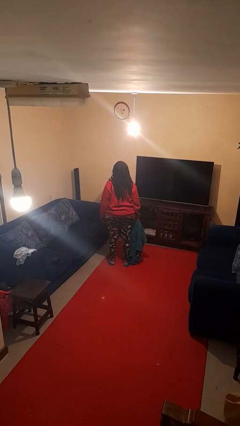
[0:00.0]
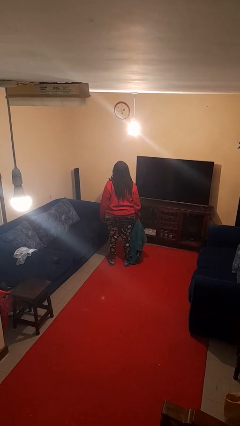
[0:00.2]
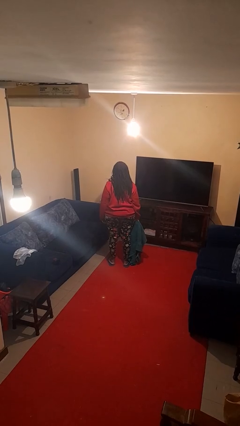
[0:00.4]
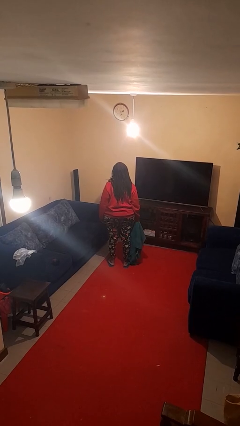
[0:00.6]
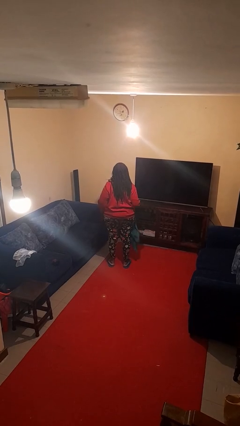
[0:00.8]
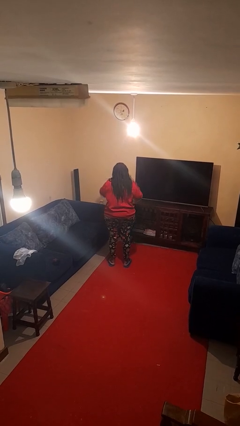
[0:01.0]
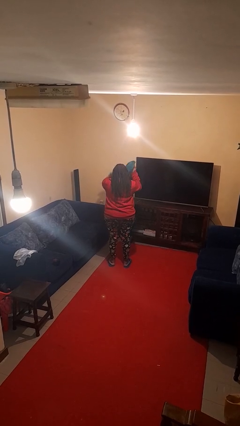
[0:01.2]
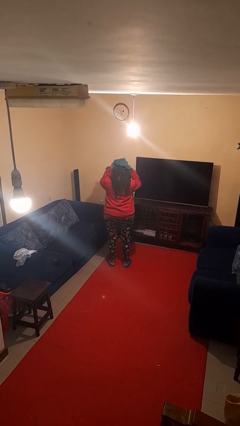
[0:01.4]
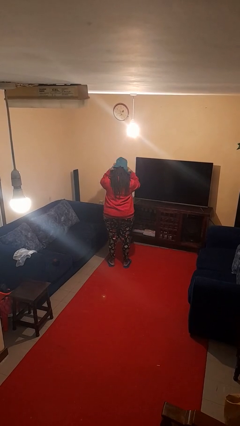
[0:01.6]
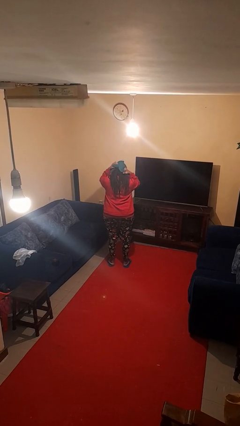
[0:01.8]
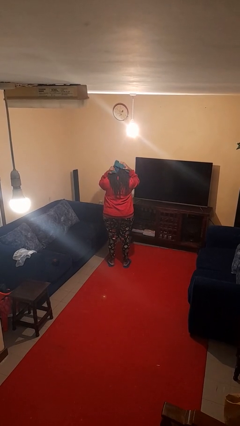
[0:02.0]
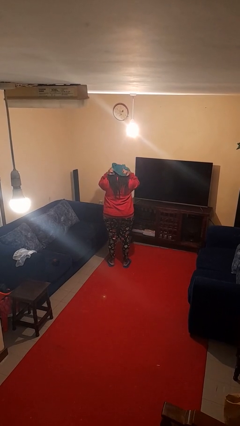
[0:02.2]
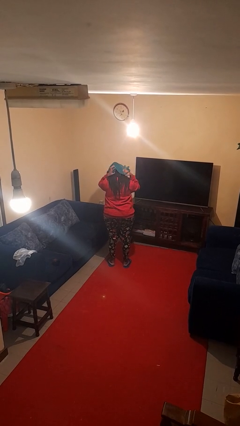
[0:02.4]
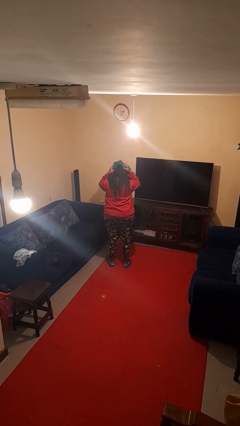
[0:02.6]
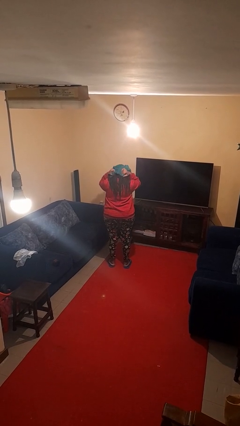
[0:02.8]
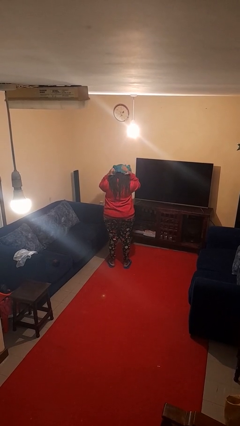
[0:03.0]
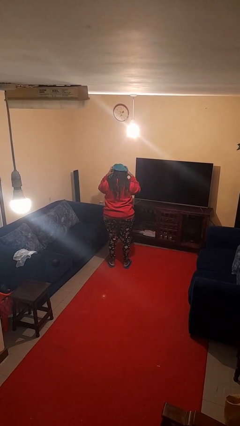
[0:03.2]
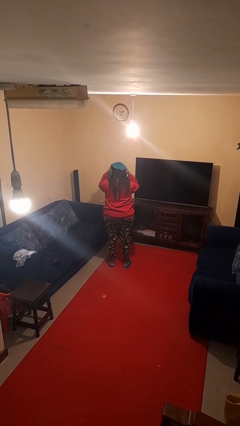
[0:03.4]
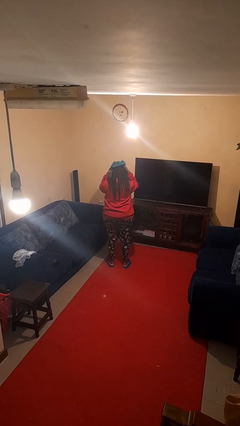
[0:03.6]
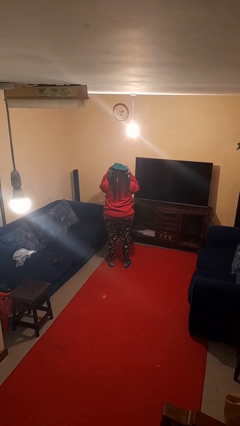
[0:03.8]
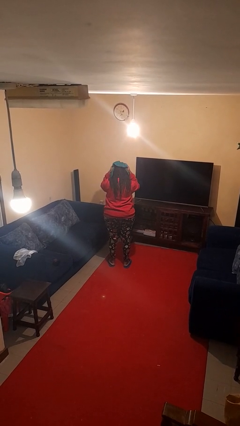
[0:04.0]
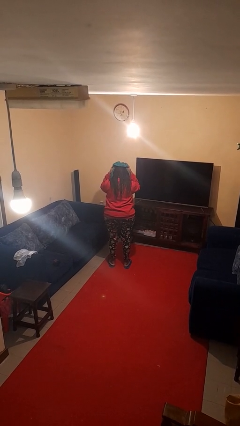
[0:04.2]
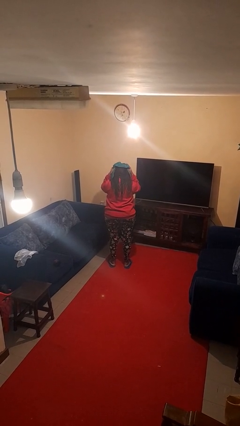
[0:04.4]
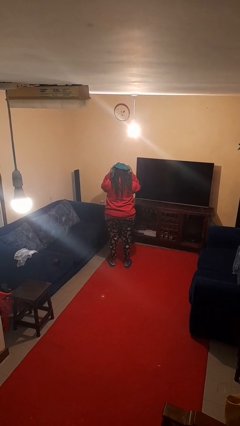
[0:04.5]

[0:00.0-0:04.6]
person dries hair with towel

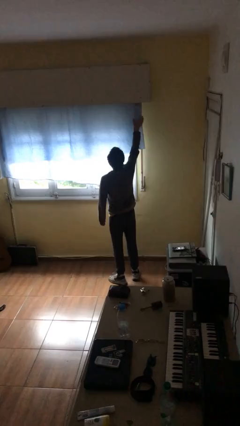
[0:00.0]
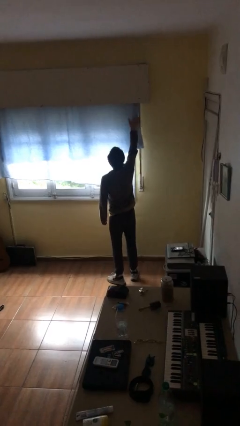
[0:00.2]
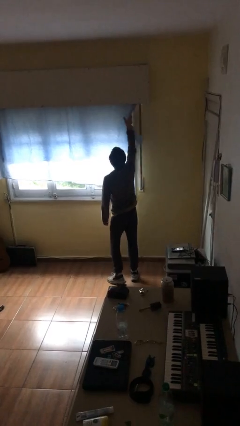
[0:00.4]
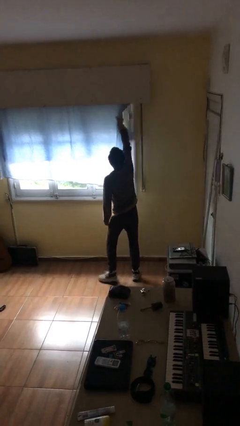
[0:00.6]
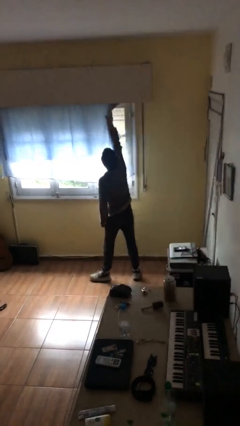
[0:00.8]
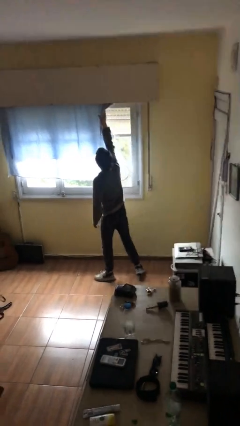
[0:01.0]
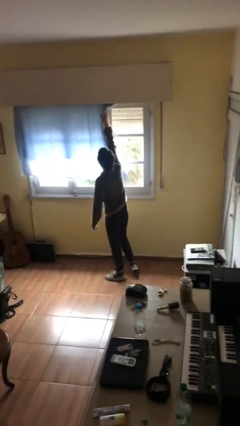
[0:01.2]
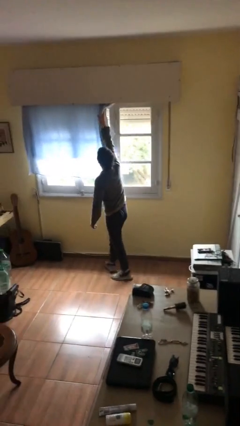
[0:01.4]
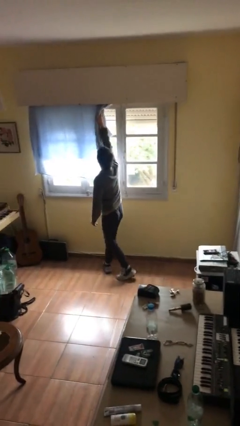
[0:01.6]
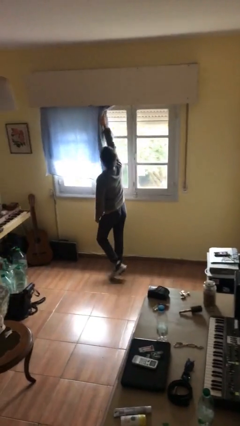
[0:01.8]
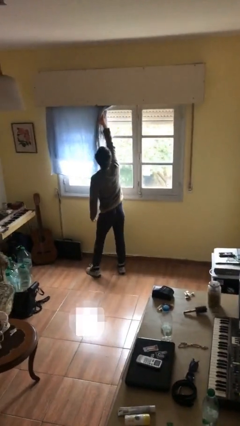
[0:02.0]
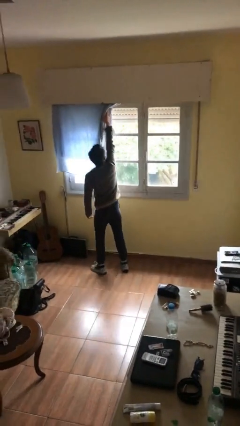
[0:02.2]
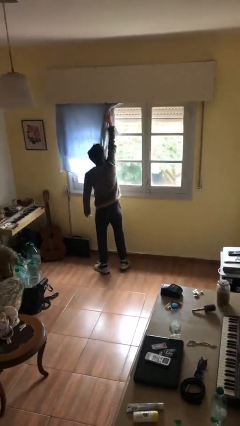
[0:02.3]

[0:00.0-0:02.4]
person opens curtains

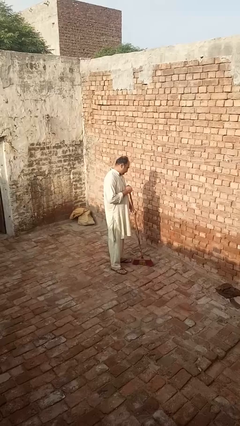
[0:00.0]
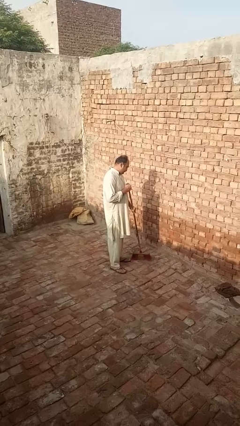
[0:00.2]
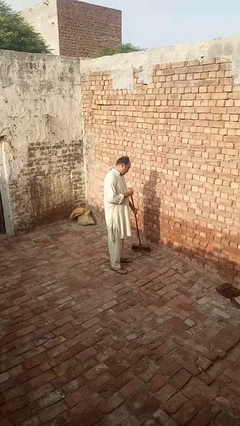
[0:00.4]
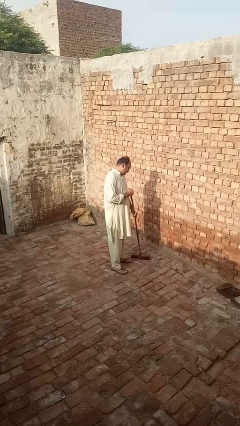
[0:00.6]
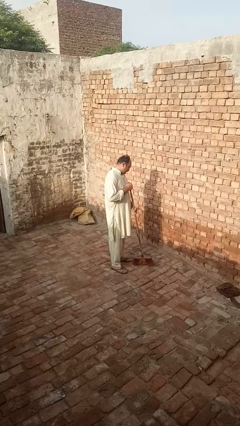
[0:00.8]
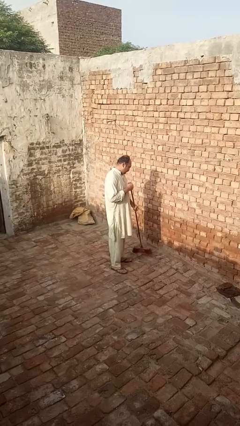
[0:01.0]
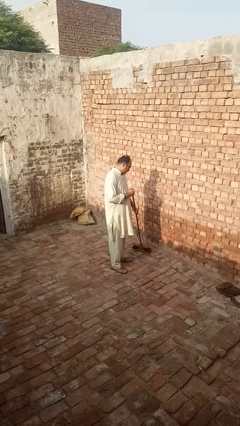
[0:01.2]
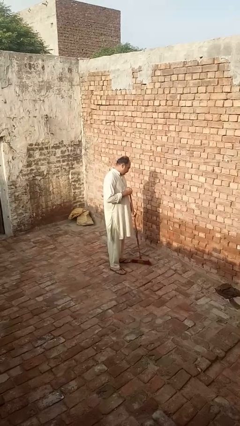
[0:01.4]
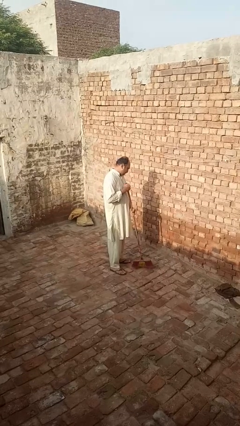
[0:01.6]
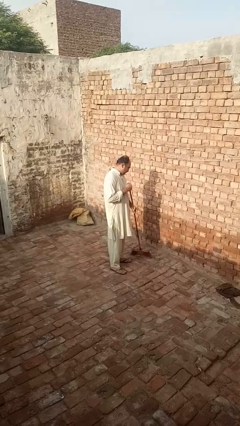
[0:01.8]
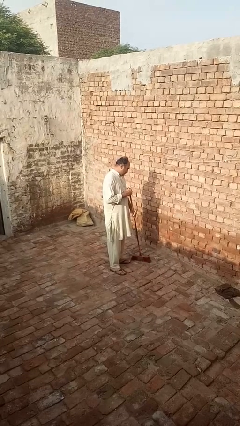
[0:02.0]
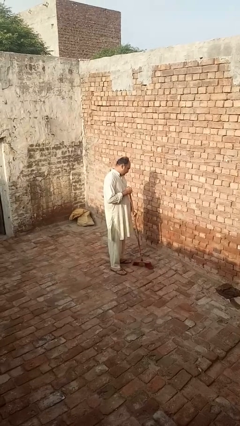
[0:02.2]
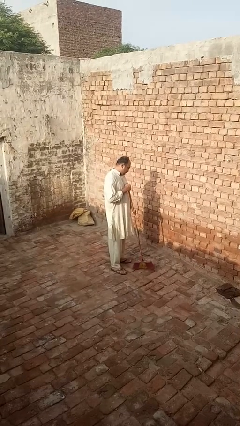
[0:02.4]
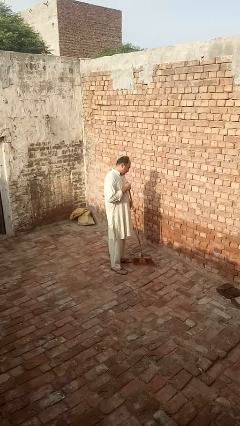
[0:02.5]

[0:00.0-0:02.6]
person sweeps floor

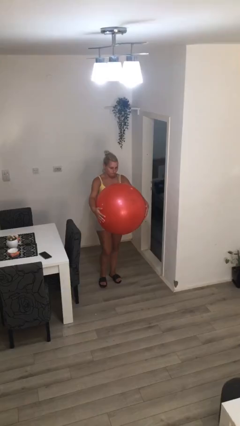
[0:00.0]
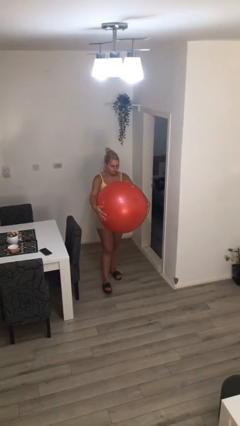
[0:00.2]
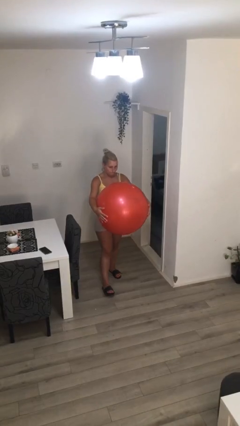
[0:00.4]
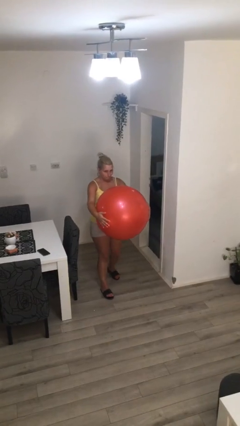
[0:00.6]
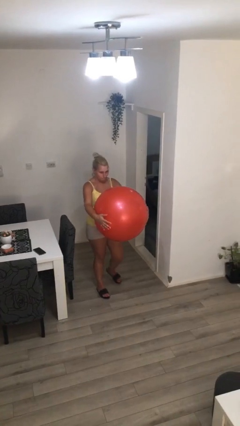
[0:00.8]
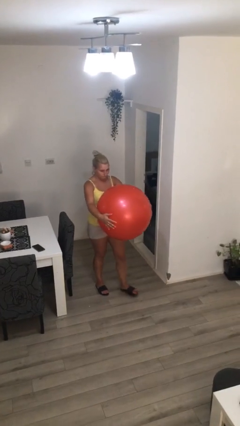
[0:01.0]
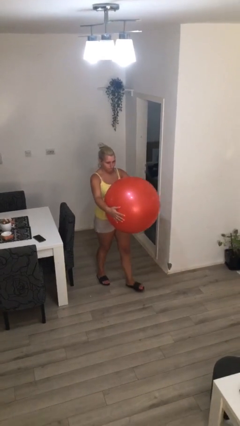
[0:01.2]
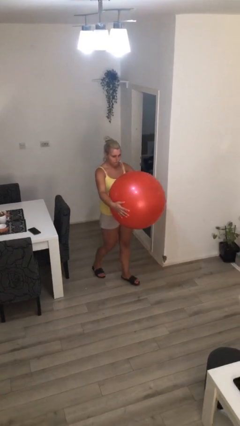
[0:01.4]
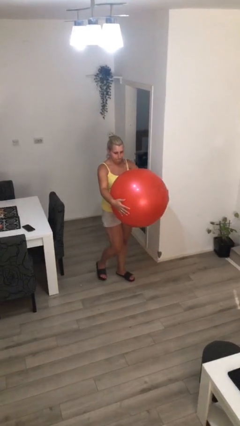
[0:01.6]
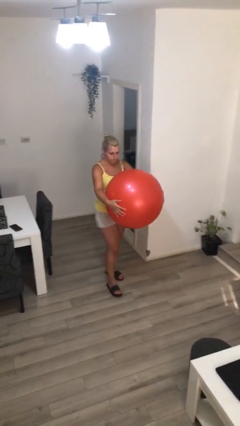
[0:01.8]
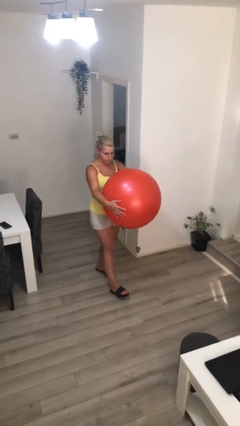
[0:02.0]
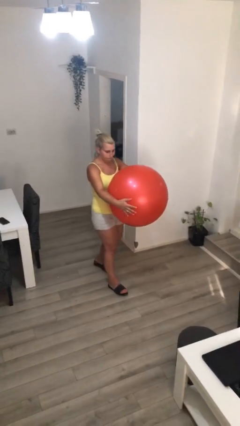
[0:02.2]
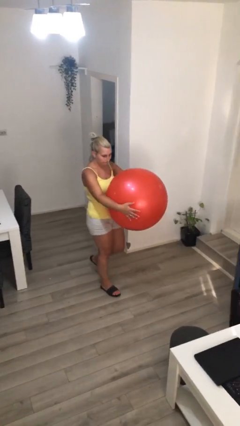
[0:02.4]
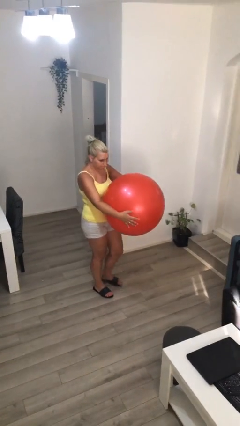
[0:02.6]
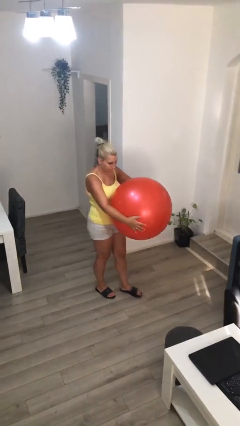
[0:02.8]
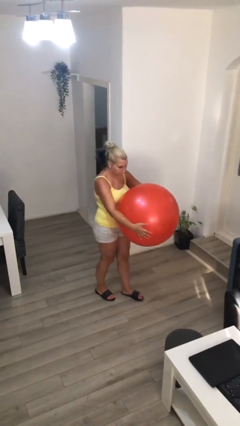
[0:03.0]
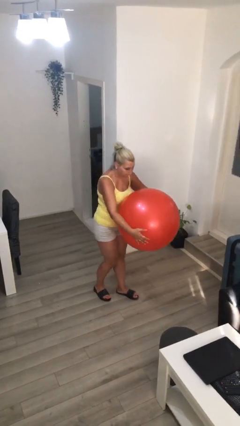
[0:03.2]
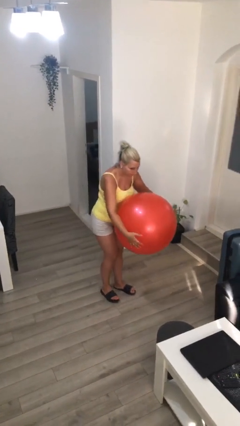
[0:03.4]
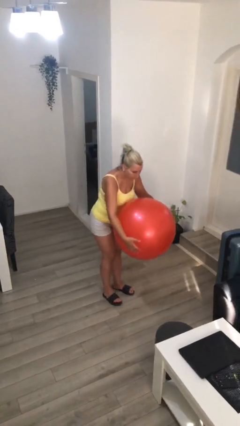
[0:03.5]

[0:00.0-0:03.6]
person carries heavy object

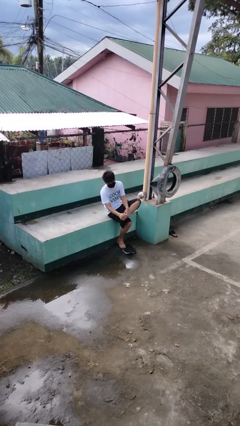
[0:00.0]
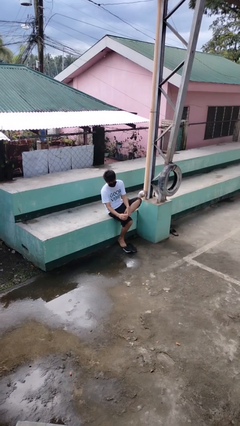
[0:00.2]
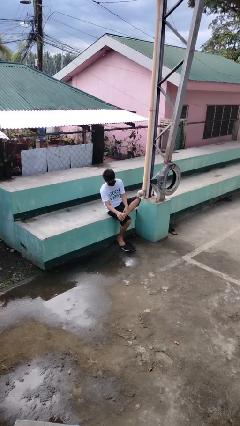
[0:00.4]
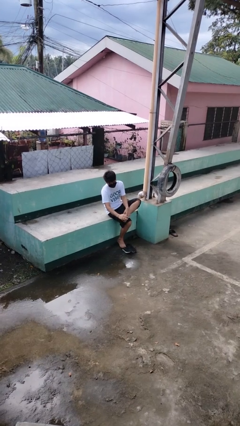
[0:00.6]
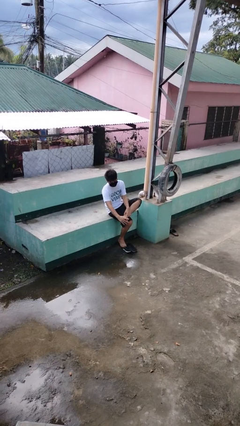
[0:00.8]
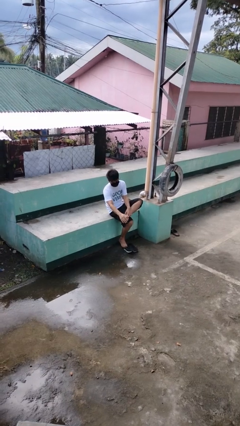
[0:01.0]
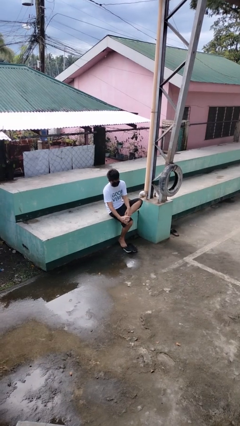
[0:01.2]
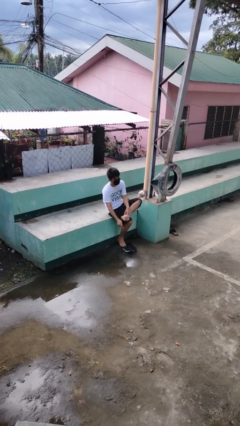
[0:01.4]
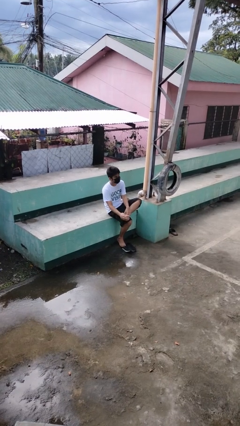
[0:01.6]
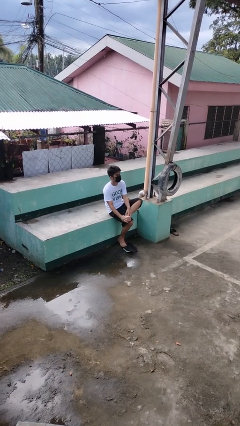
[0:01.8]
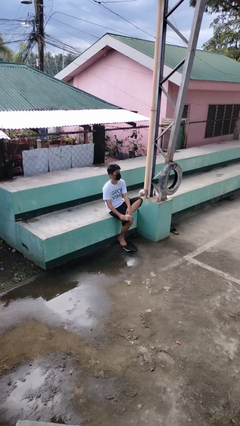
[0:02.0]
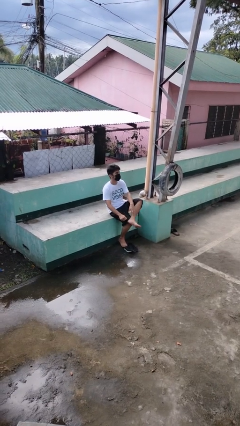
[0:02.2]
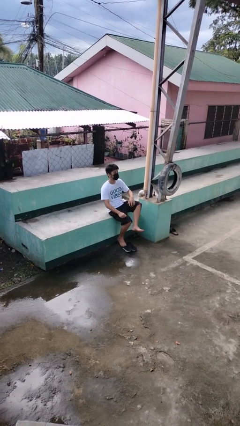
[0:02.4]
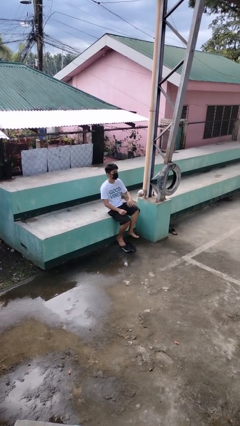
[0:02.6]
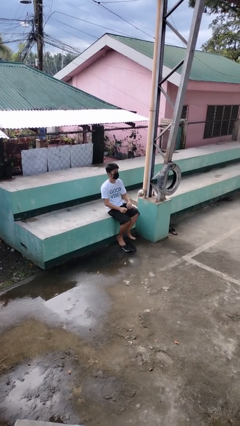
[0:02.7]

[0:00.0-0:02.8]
person rubs foot

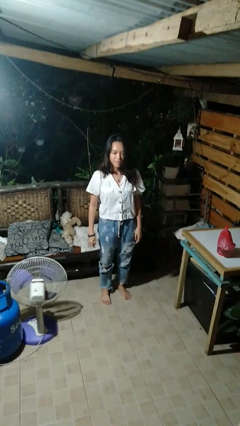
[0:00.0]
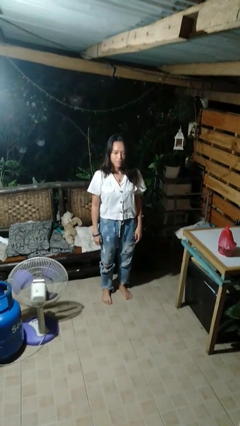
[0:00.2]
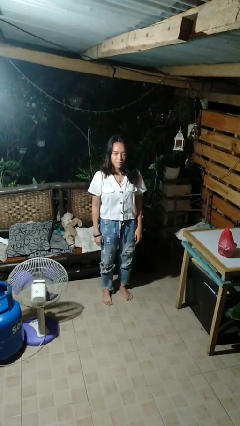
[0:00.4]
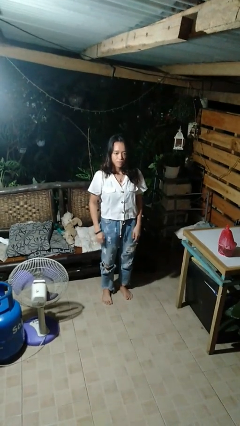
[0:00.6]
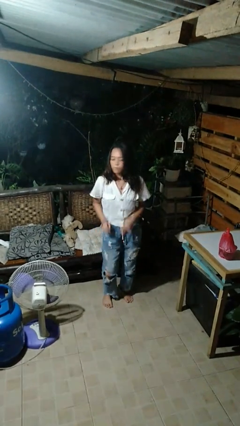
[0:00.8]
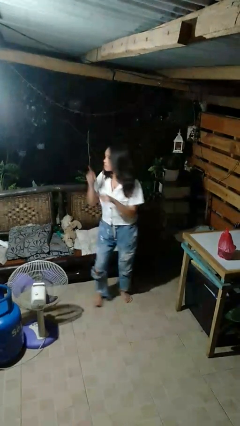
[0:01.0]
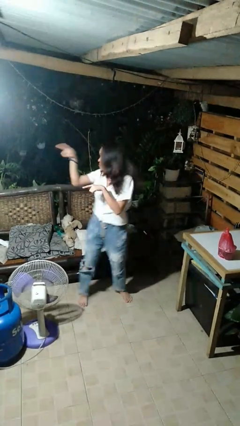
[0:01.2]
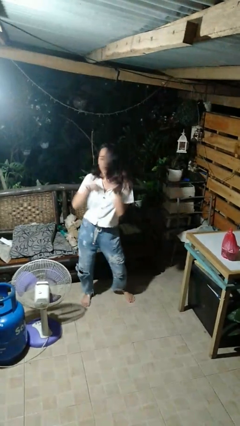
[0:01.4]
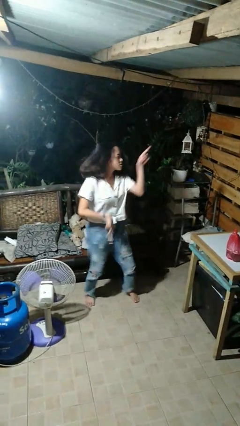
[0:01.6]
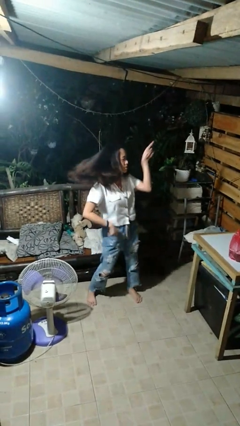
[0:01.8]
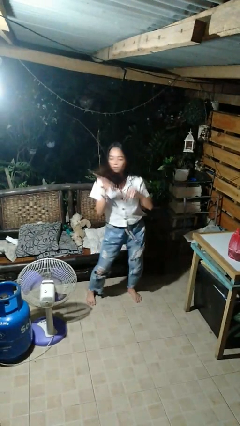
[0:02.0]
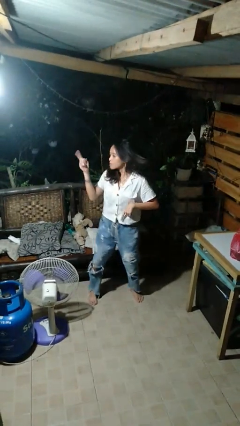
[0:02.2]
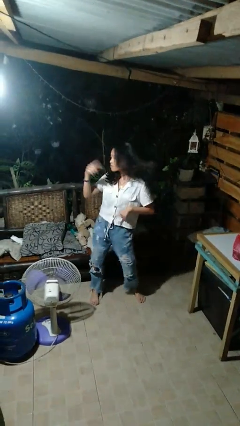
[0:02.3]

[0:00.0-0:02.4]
person dances in place
